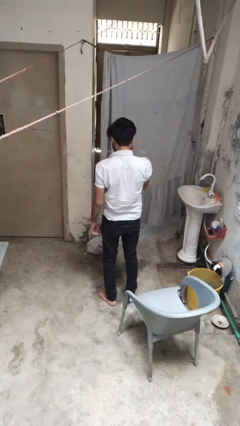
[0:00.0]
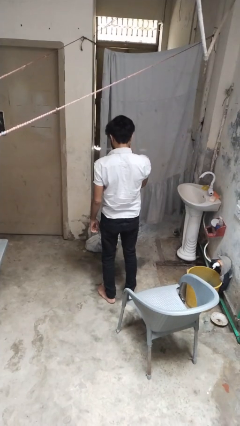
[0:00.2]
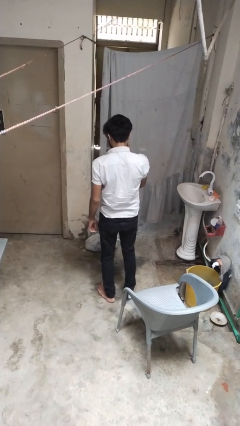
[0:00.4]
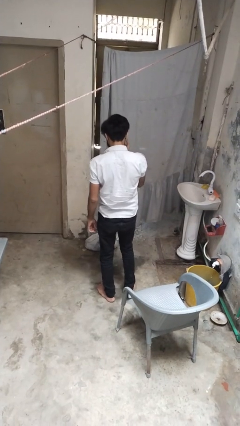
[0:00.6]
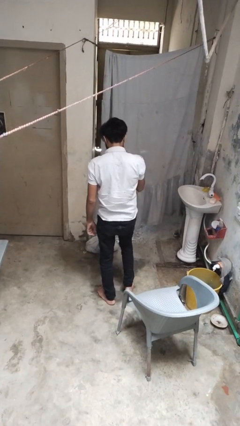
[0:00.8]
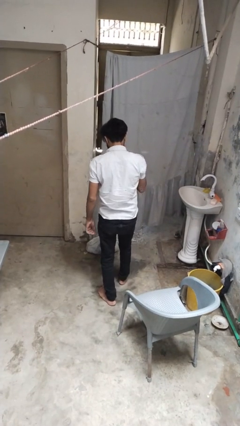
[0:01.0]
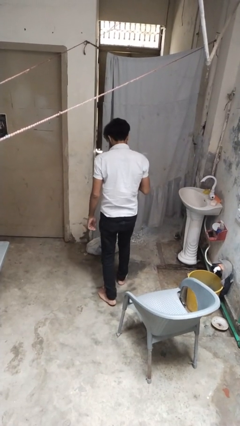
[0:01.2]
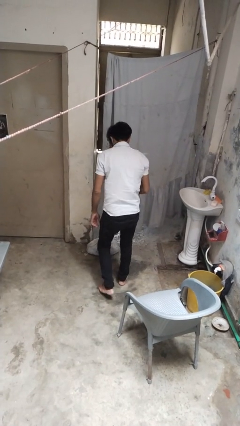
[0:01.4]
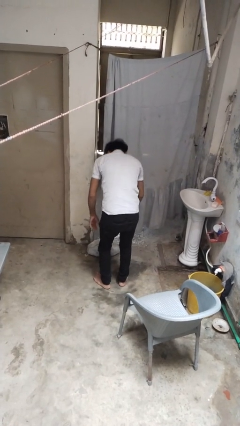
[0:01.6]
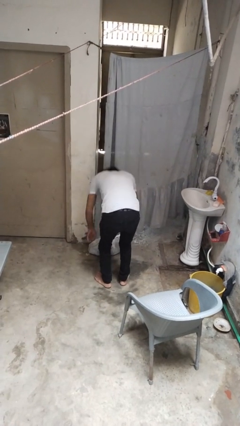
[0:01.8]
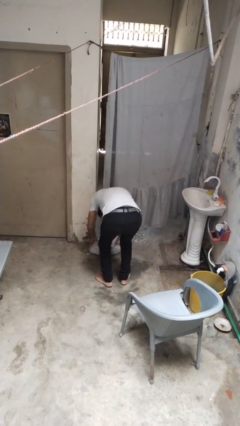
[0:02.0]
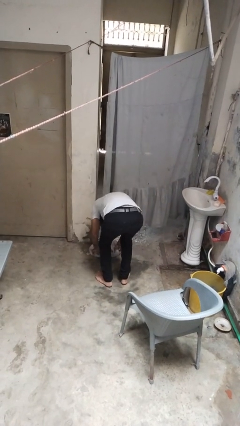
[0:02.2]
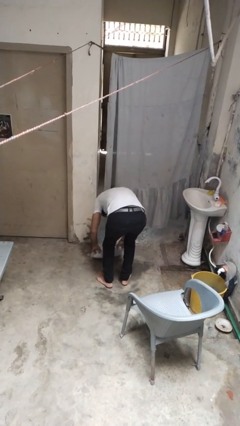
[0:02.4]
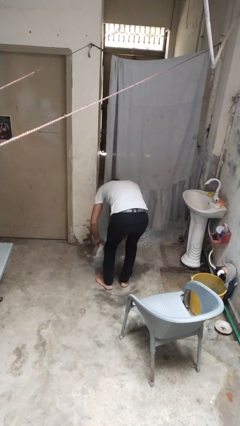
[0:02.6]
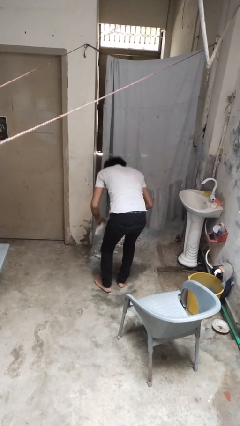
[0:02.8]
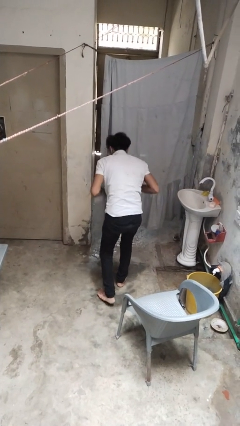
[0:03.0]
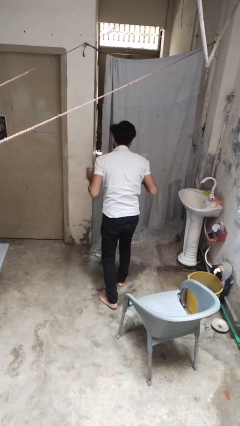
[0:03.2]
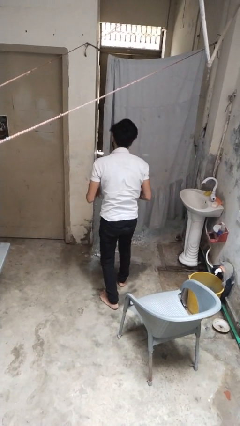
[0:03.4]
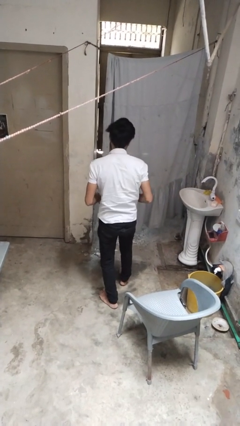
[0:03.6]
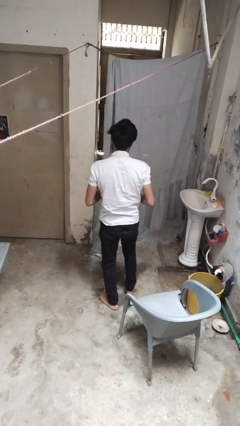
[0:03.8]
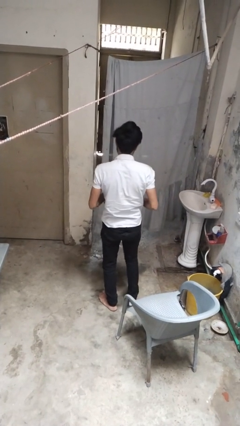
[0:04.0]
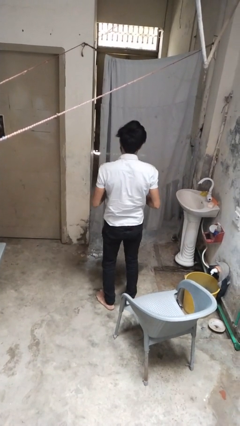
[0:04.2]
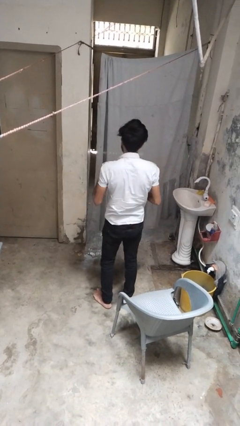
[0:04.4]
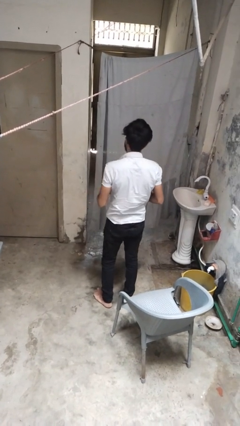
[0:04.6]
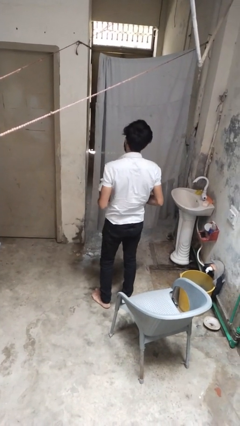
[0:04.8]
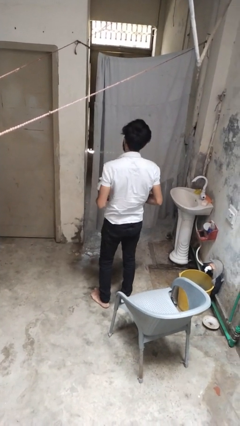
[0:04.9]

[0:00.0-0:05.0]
person picks up object from floor

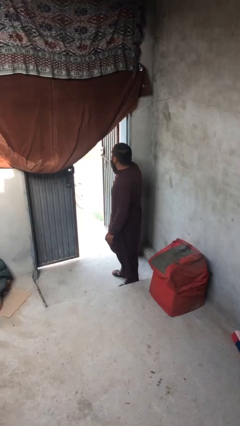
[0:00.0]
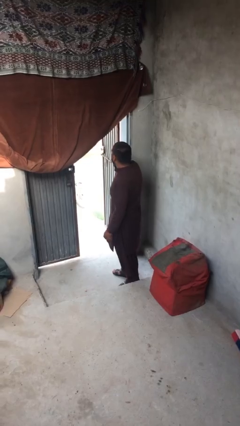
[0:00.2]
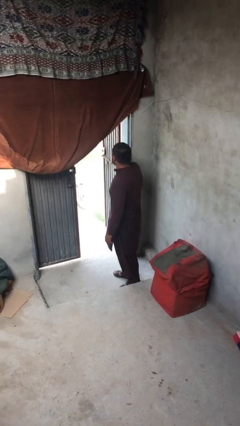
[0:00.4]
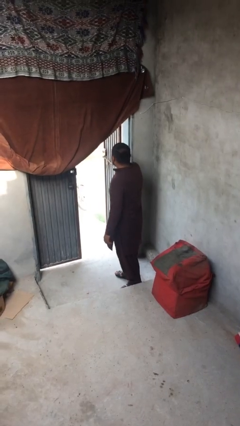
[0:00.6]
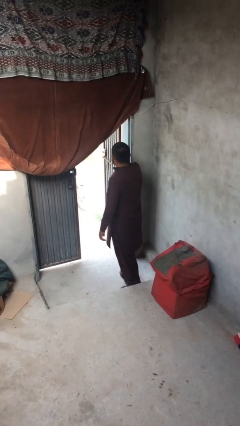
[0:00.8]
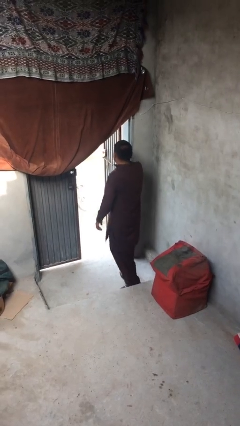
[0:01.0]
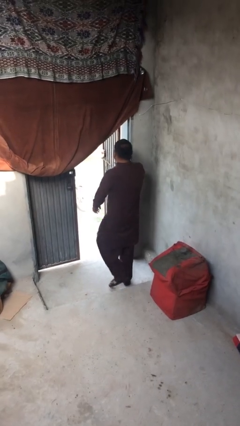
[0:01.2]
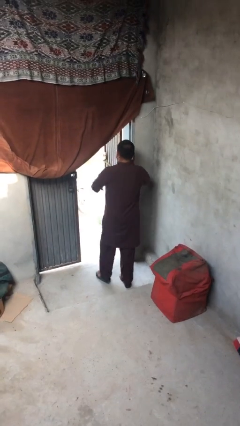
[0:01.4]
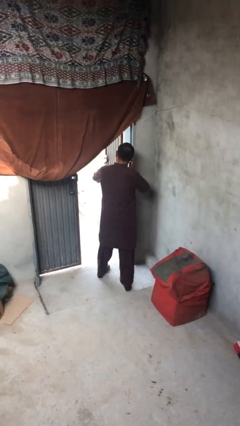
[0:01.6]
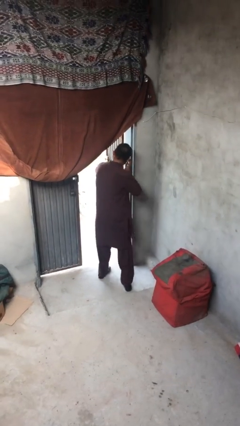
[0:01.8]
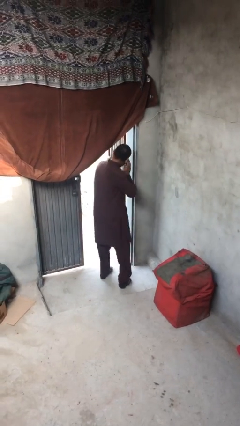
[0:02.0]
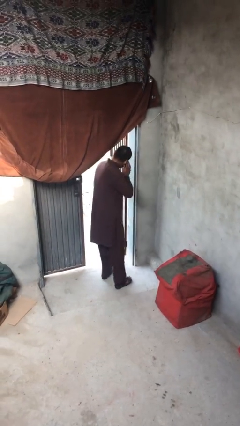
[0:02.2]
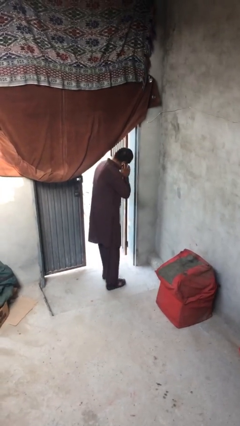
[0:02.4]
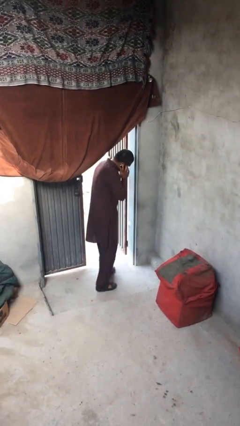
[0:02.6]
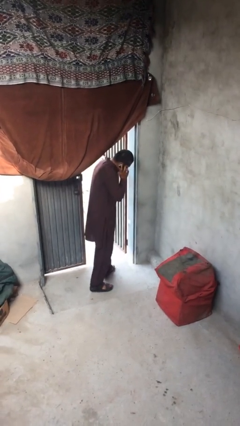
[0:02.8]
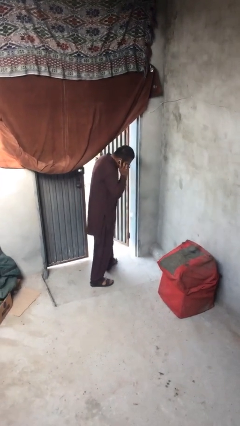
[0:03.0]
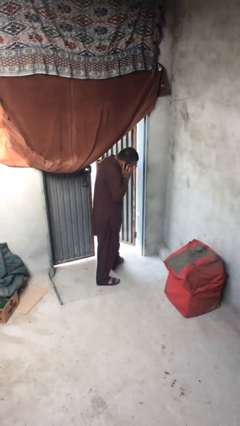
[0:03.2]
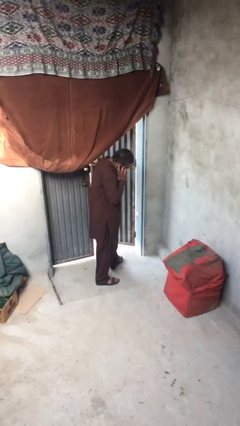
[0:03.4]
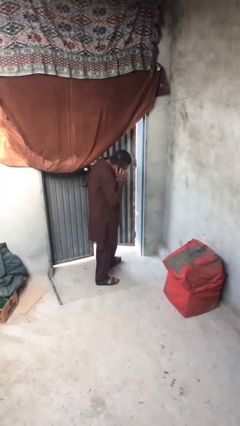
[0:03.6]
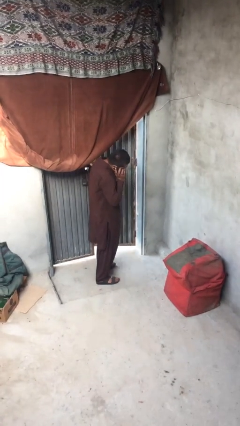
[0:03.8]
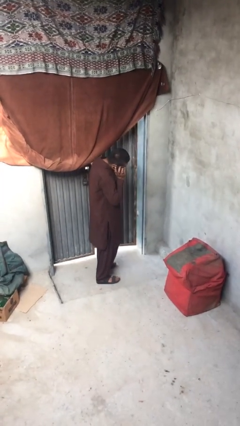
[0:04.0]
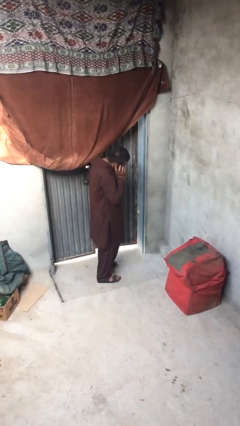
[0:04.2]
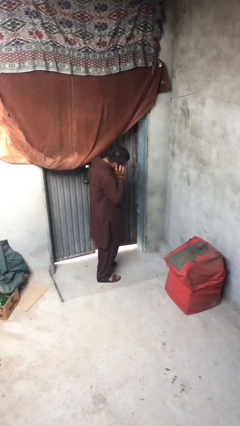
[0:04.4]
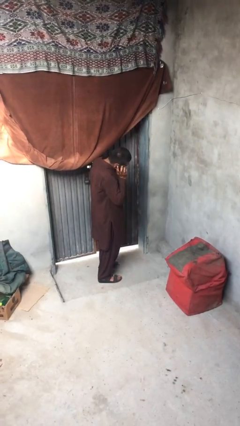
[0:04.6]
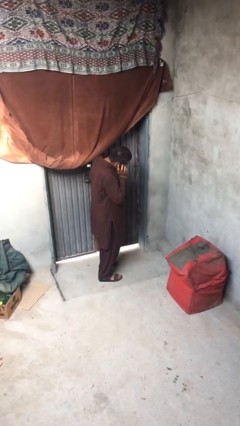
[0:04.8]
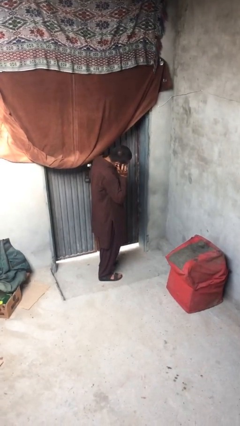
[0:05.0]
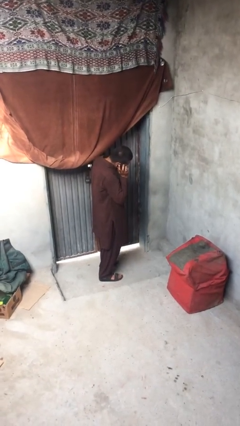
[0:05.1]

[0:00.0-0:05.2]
person closes facility door

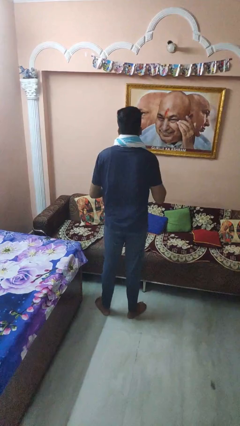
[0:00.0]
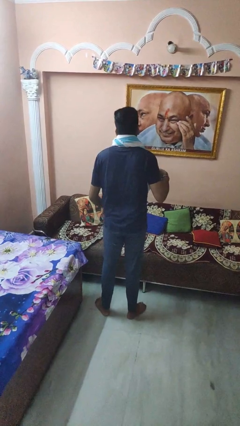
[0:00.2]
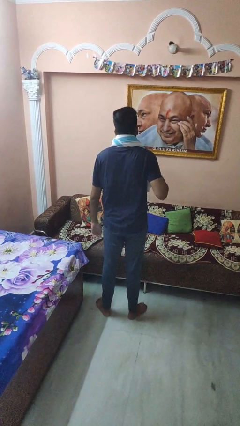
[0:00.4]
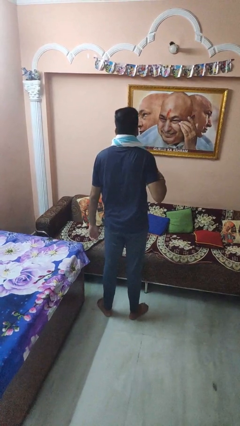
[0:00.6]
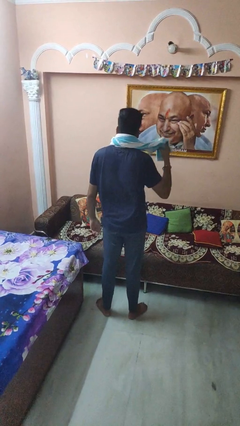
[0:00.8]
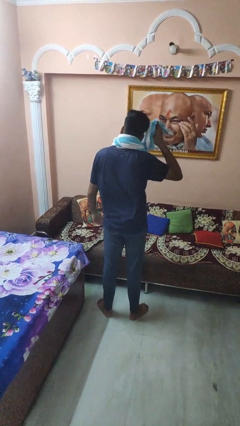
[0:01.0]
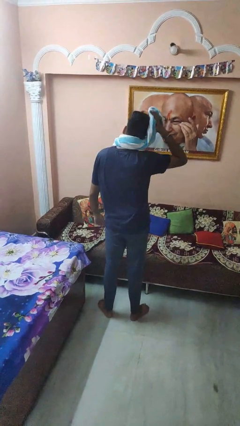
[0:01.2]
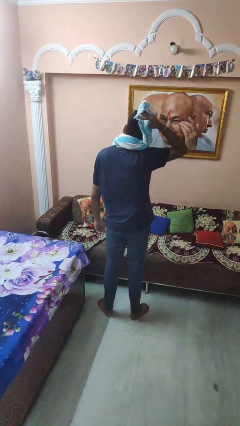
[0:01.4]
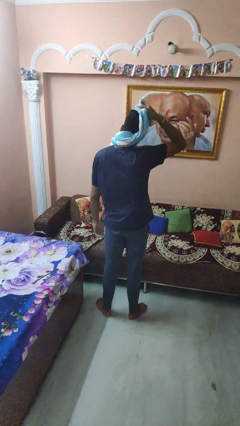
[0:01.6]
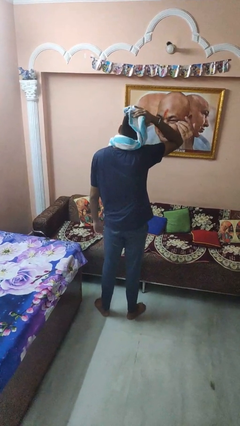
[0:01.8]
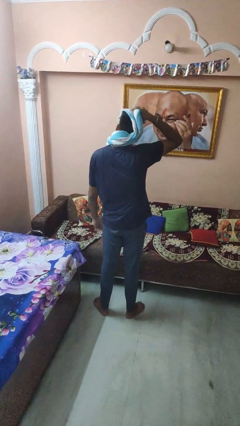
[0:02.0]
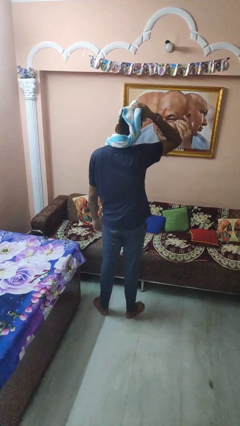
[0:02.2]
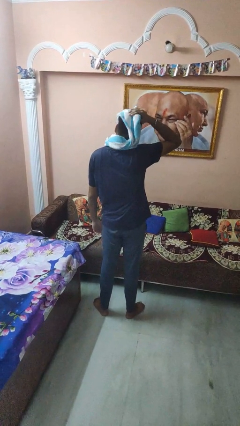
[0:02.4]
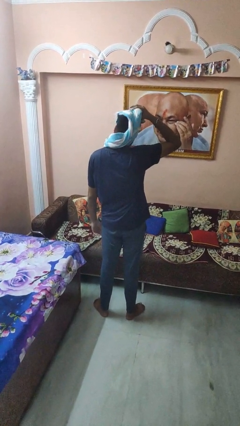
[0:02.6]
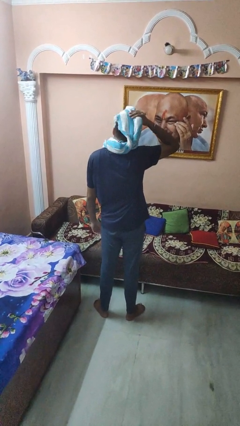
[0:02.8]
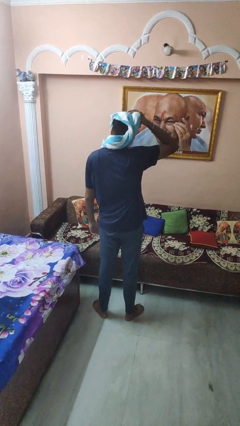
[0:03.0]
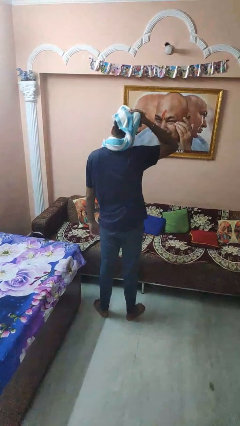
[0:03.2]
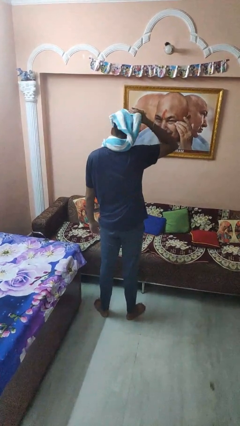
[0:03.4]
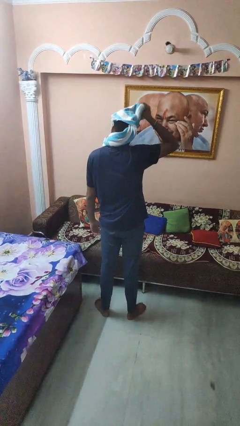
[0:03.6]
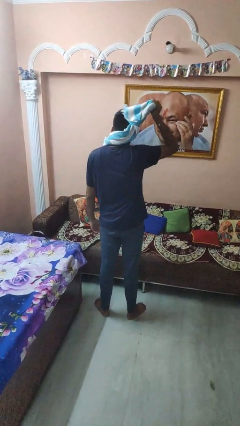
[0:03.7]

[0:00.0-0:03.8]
person dries hair with towel

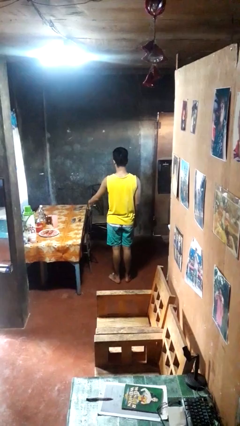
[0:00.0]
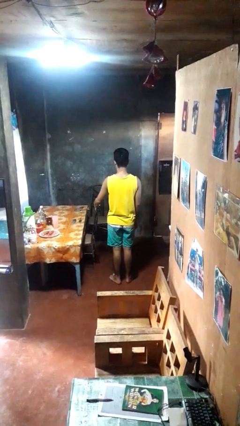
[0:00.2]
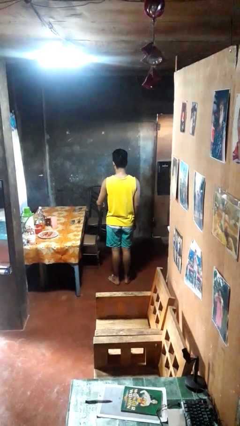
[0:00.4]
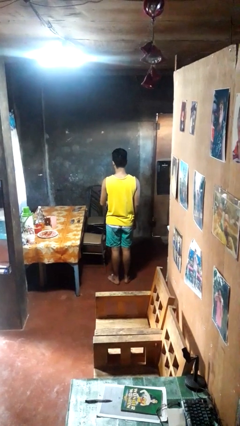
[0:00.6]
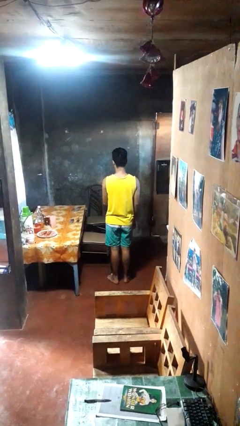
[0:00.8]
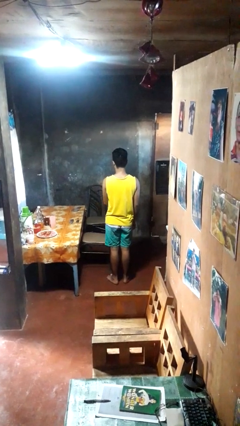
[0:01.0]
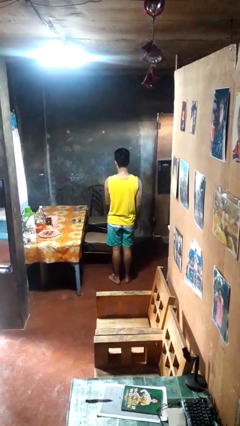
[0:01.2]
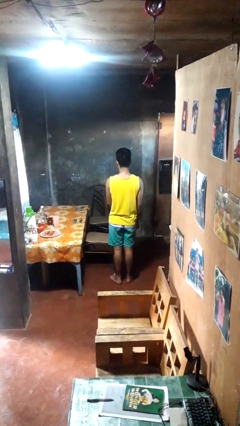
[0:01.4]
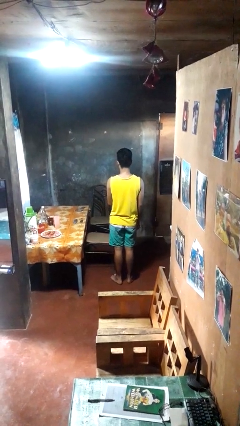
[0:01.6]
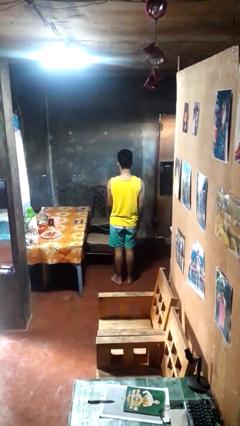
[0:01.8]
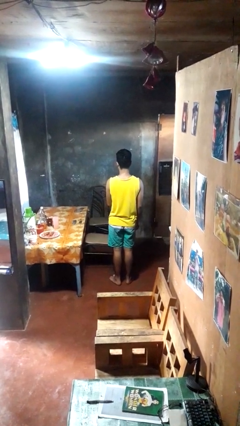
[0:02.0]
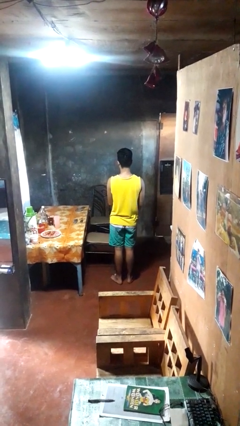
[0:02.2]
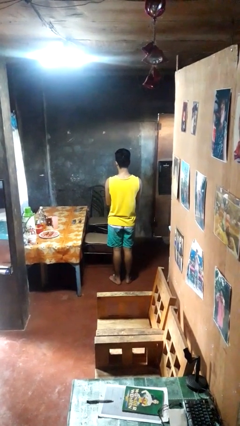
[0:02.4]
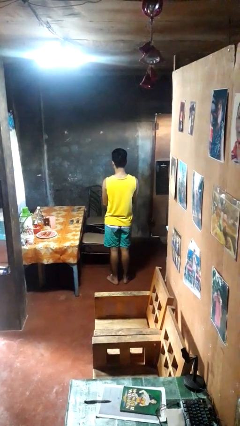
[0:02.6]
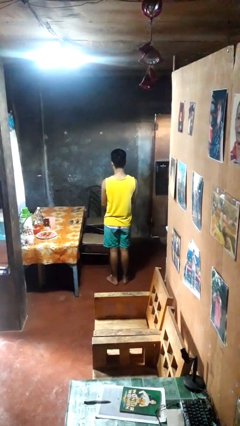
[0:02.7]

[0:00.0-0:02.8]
person pulls out chair

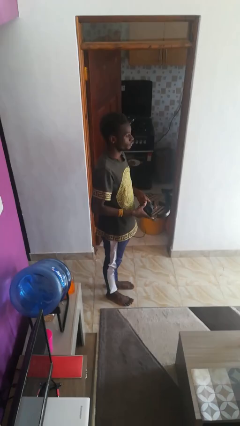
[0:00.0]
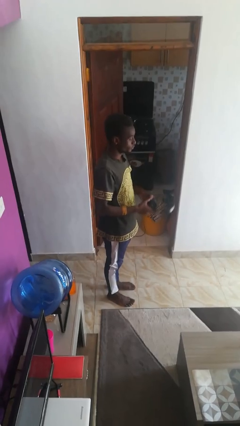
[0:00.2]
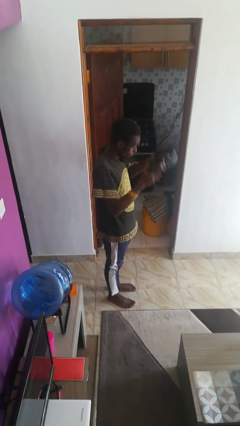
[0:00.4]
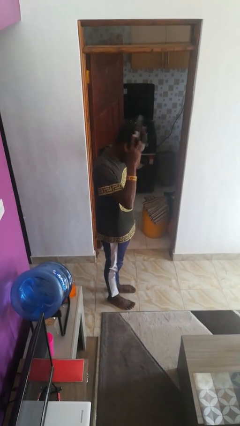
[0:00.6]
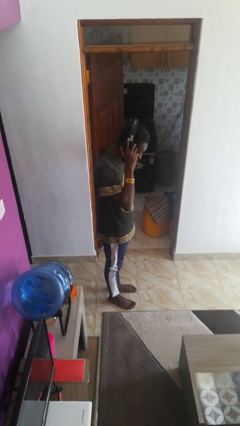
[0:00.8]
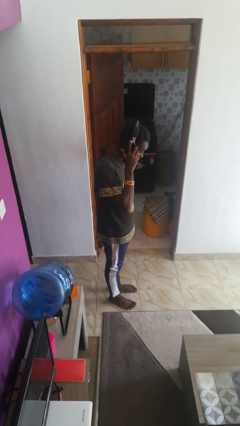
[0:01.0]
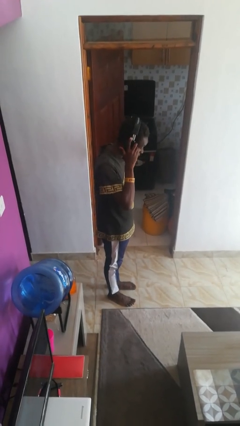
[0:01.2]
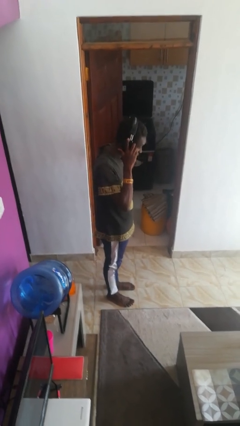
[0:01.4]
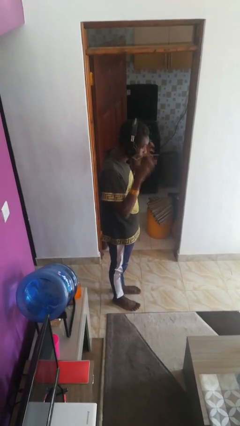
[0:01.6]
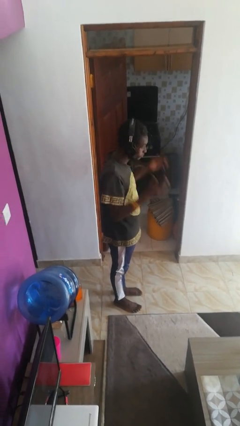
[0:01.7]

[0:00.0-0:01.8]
person puts on headphones
